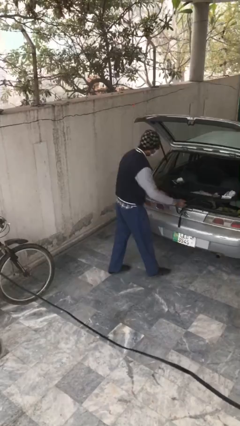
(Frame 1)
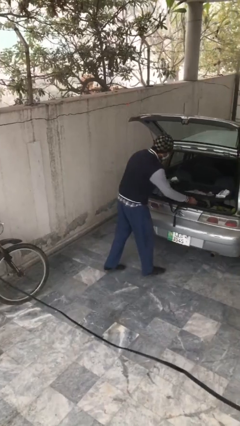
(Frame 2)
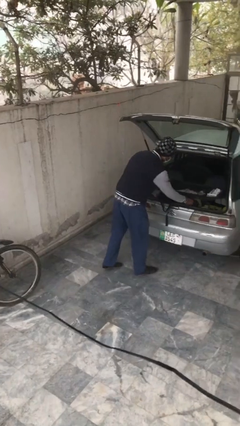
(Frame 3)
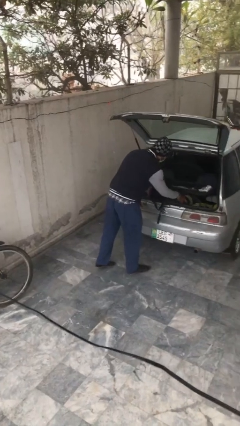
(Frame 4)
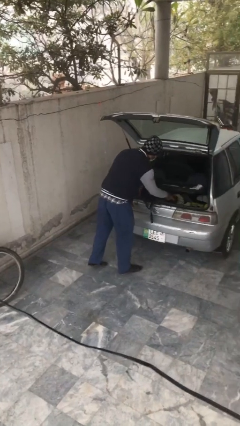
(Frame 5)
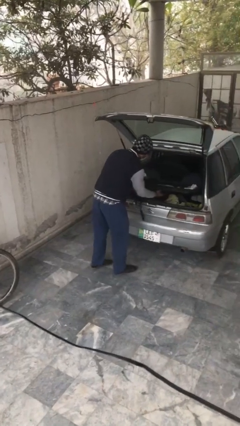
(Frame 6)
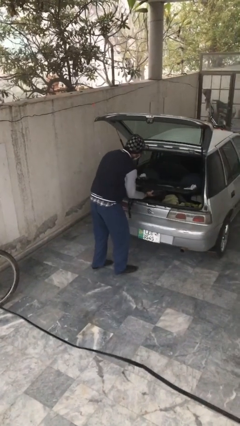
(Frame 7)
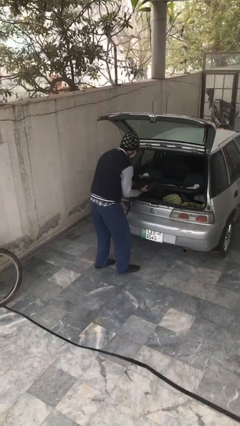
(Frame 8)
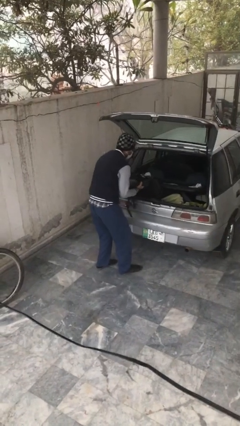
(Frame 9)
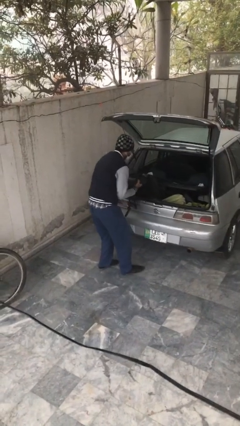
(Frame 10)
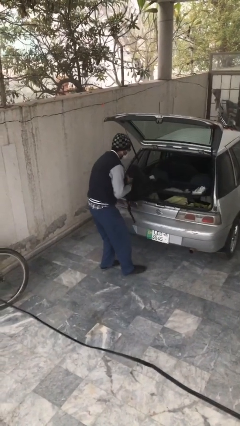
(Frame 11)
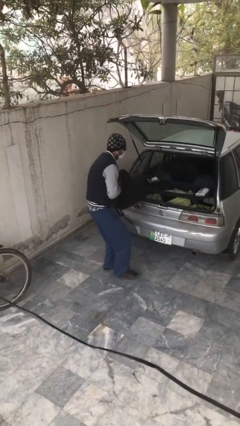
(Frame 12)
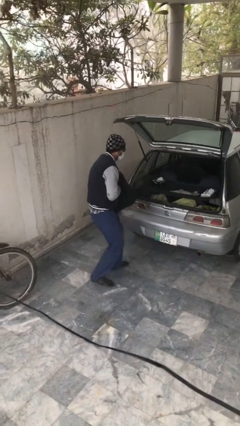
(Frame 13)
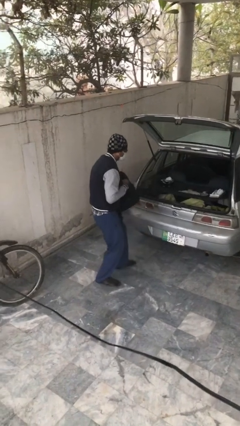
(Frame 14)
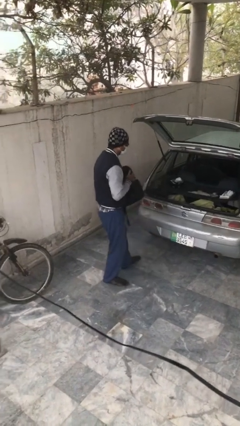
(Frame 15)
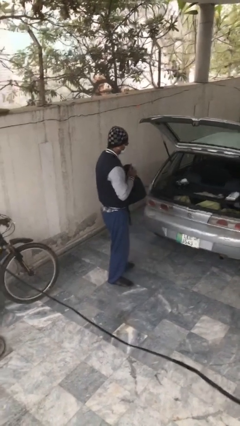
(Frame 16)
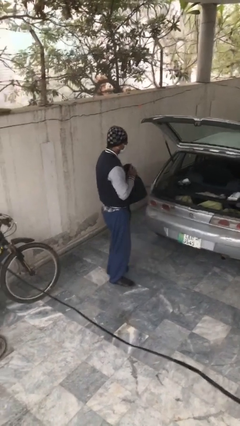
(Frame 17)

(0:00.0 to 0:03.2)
person unloads car

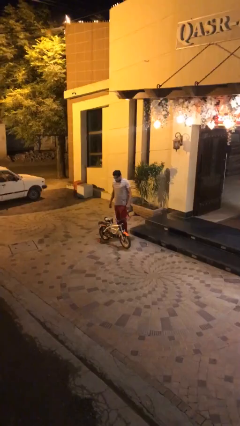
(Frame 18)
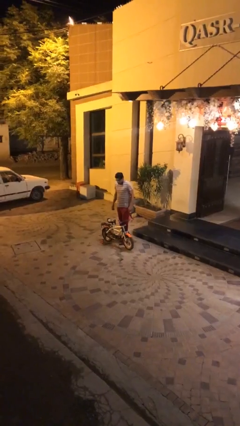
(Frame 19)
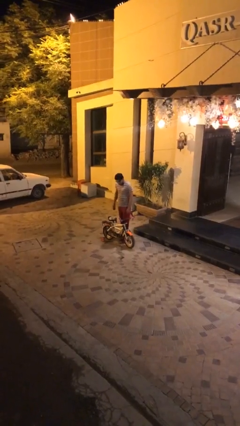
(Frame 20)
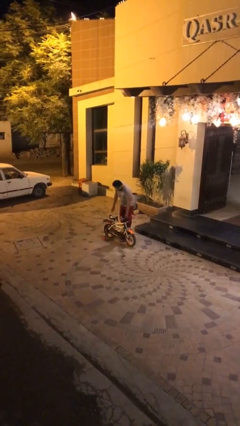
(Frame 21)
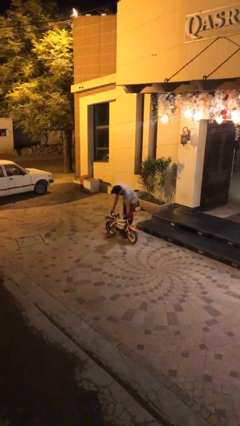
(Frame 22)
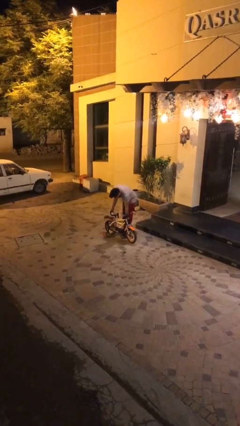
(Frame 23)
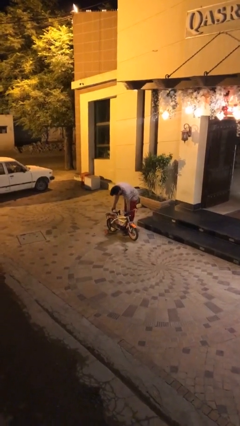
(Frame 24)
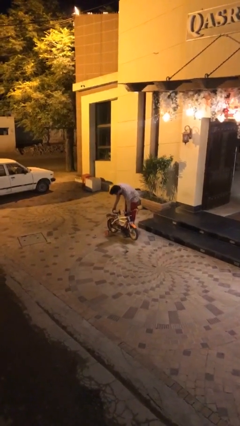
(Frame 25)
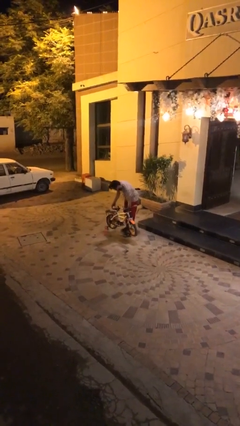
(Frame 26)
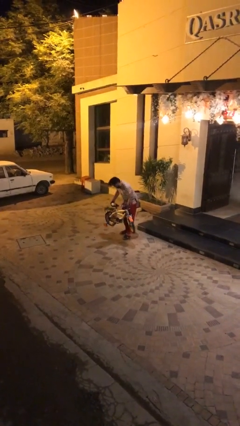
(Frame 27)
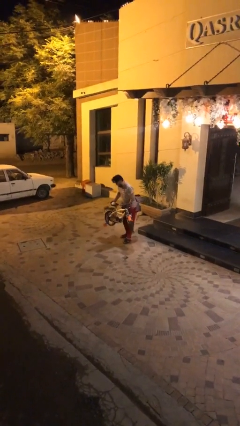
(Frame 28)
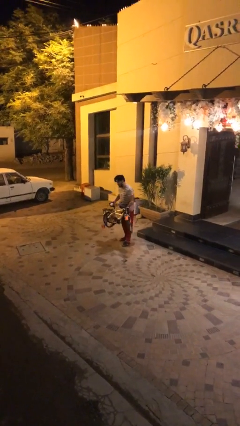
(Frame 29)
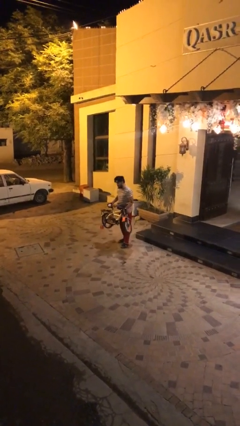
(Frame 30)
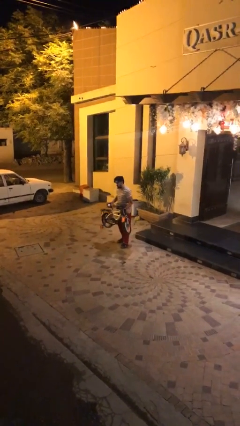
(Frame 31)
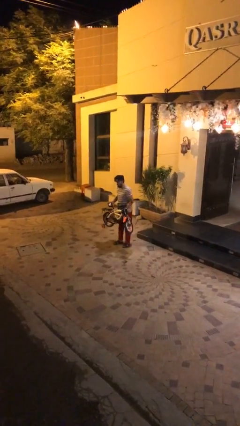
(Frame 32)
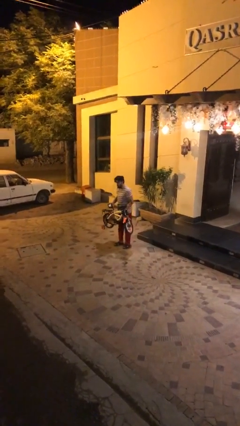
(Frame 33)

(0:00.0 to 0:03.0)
person picks up object from floor

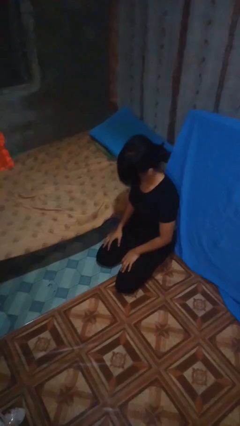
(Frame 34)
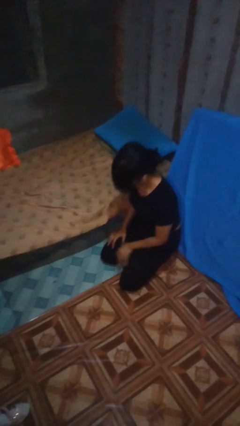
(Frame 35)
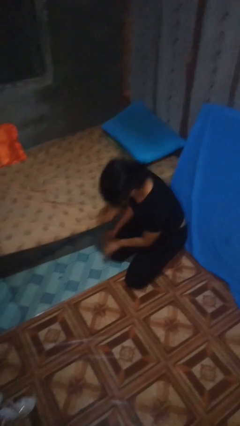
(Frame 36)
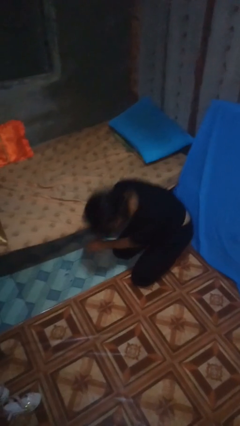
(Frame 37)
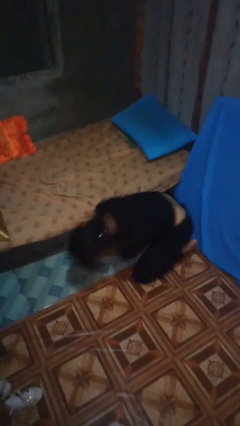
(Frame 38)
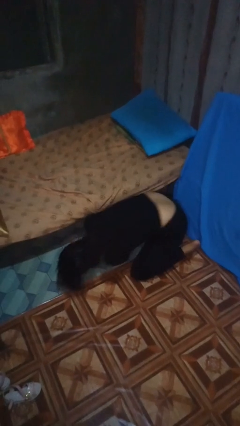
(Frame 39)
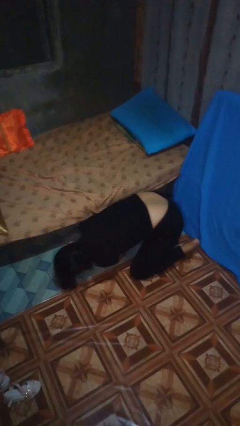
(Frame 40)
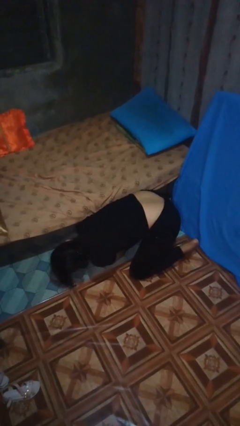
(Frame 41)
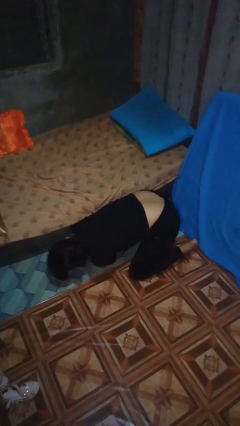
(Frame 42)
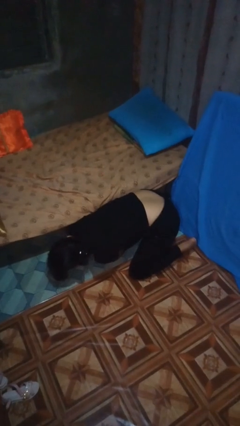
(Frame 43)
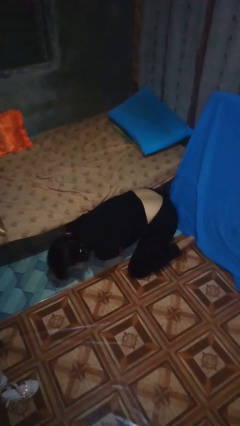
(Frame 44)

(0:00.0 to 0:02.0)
person searches under bed

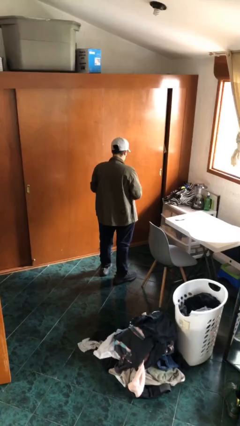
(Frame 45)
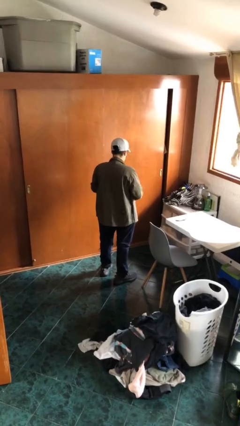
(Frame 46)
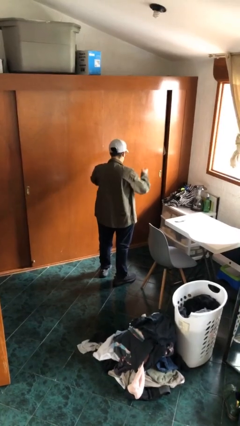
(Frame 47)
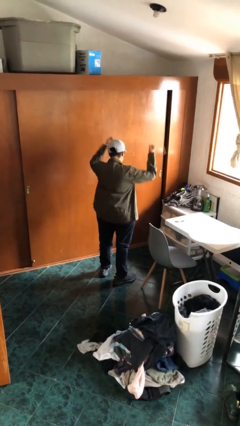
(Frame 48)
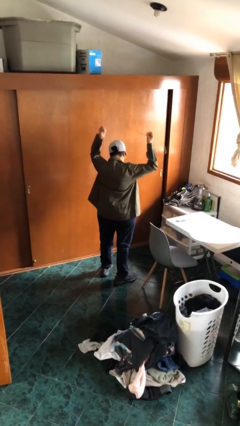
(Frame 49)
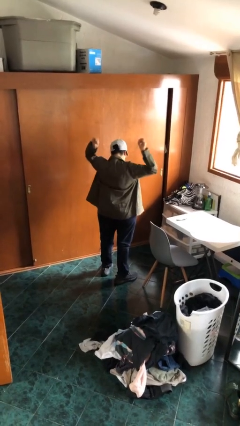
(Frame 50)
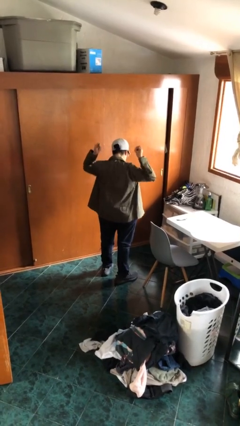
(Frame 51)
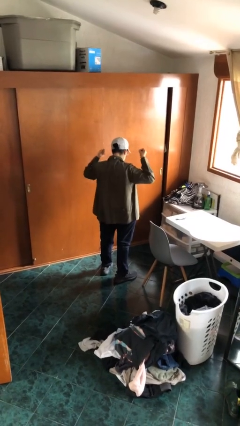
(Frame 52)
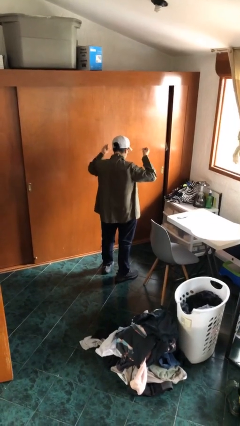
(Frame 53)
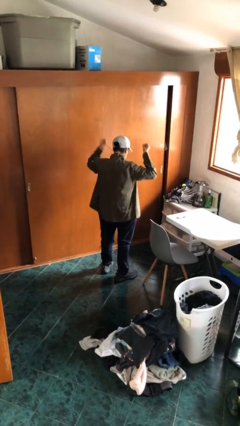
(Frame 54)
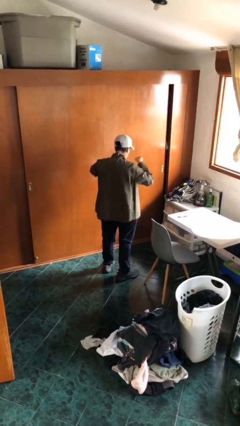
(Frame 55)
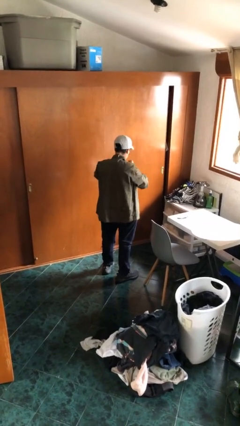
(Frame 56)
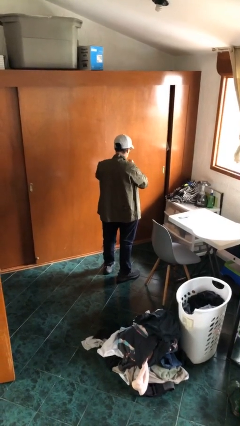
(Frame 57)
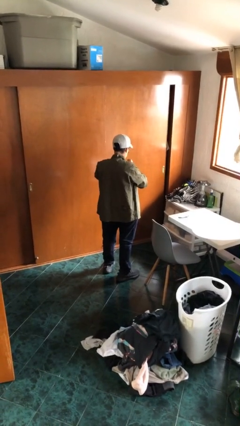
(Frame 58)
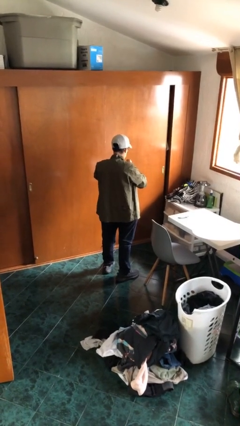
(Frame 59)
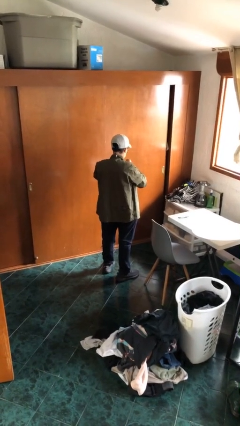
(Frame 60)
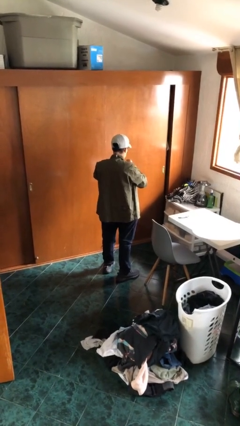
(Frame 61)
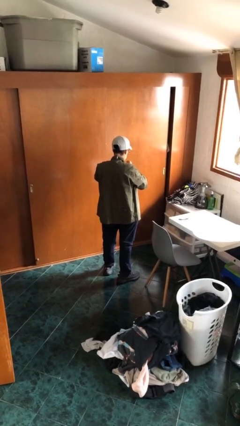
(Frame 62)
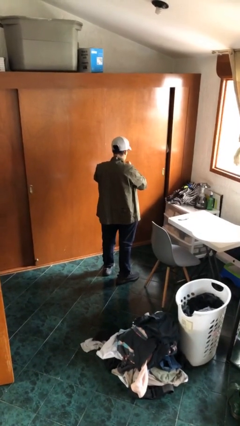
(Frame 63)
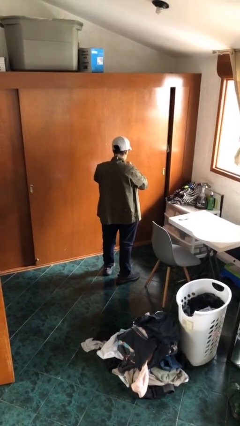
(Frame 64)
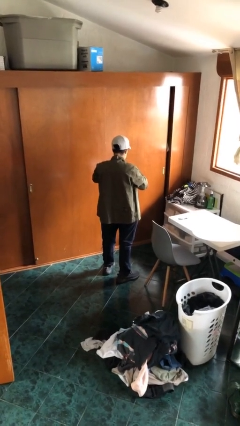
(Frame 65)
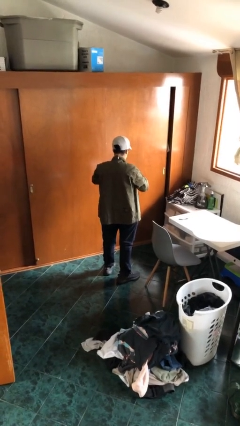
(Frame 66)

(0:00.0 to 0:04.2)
person puts on necklace

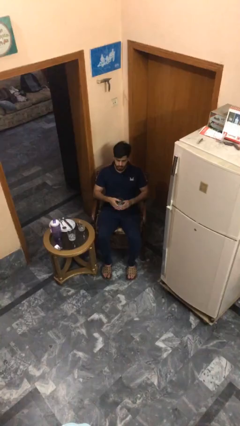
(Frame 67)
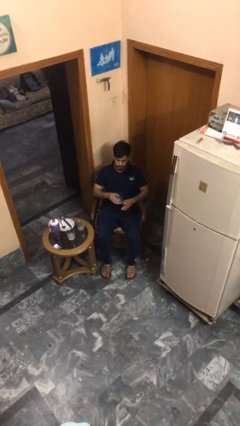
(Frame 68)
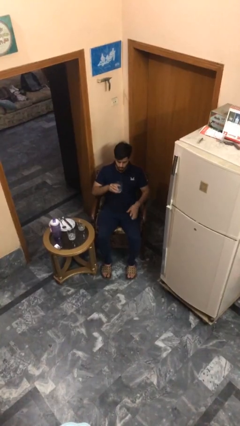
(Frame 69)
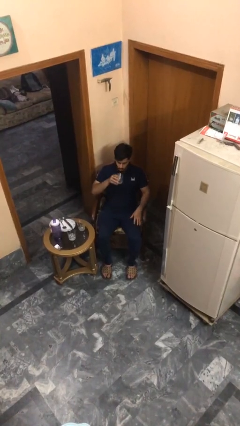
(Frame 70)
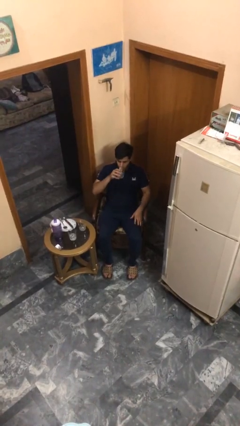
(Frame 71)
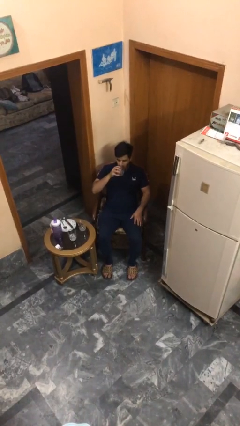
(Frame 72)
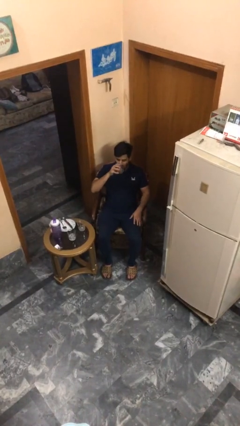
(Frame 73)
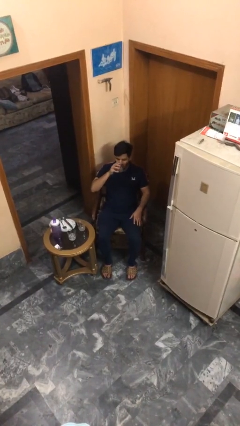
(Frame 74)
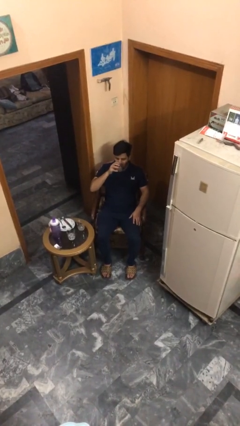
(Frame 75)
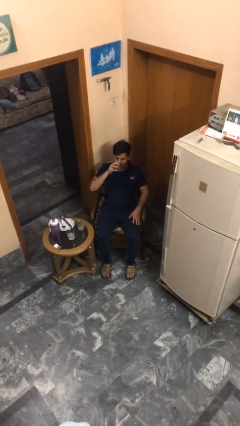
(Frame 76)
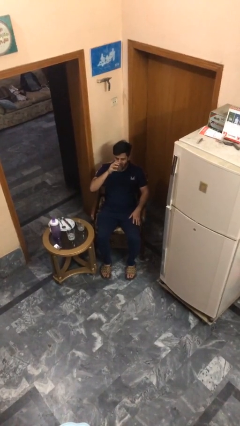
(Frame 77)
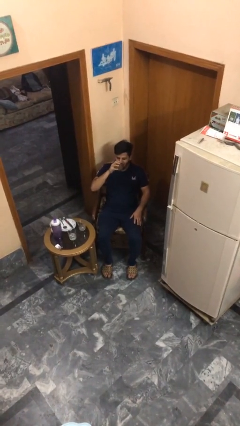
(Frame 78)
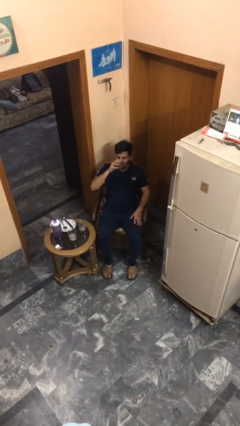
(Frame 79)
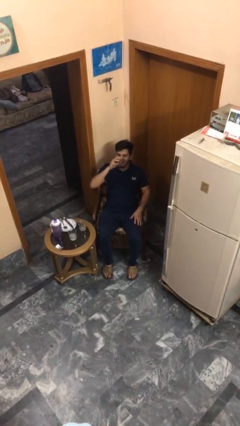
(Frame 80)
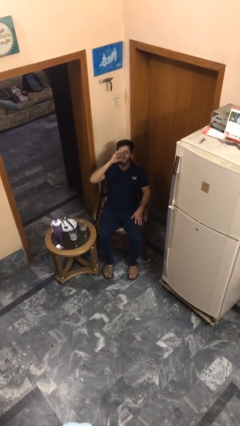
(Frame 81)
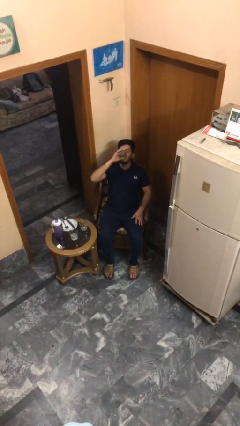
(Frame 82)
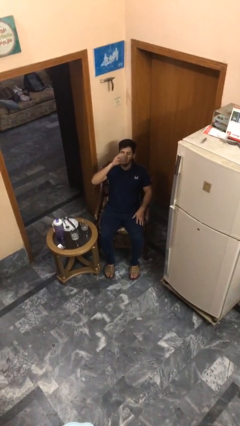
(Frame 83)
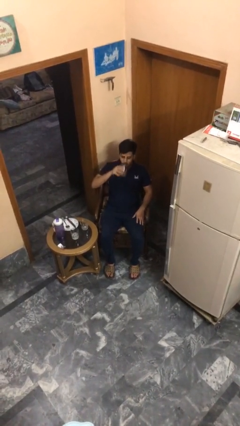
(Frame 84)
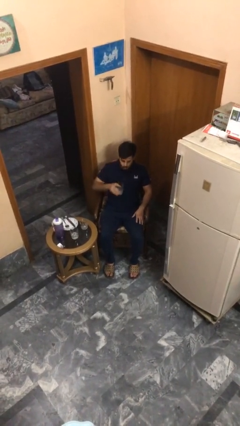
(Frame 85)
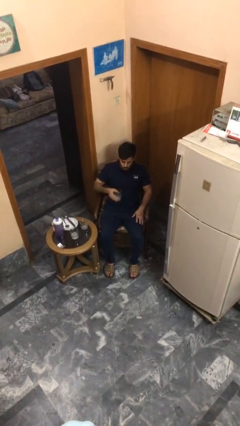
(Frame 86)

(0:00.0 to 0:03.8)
person drinks from shotglass

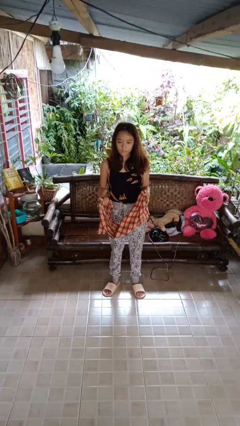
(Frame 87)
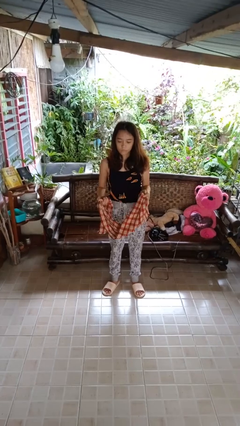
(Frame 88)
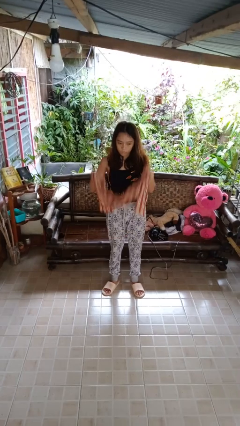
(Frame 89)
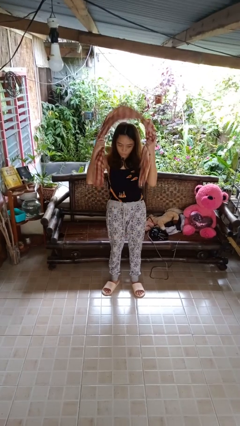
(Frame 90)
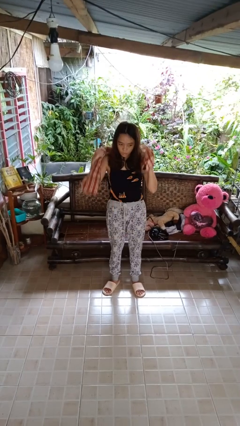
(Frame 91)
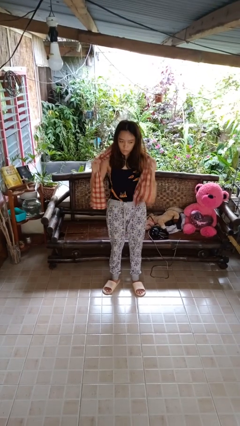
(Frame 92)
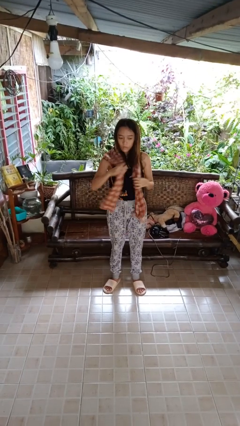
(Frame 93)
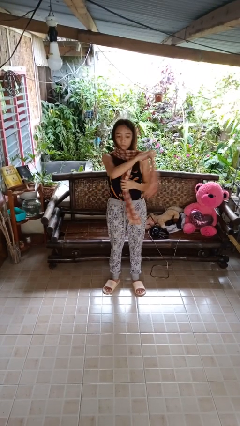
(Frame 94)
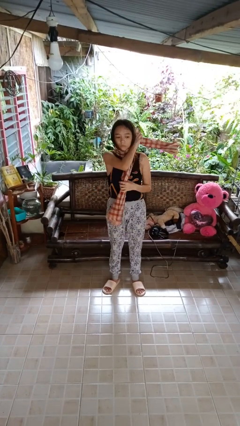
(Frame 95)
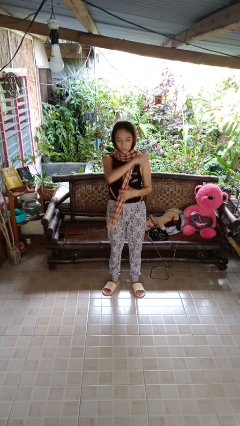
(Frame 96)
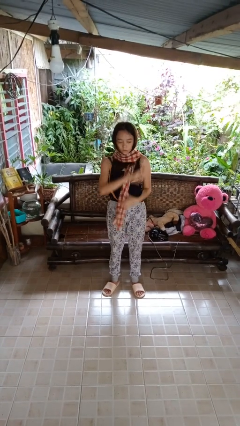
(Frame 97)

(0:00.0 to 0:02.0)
person puts on scarf
